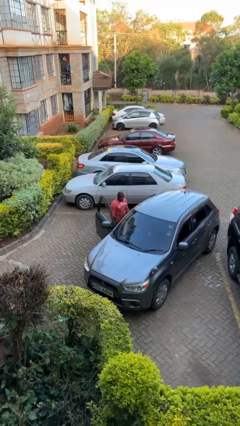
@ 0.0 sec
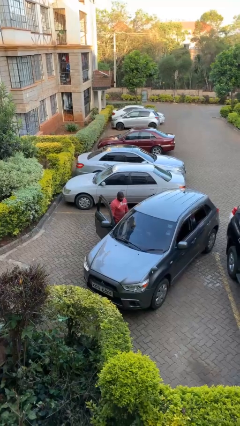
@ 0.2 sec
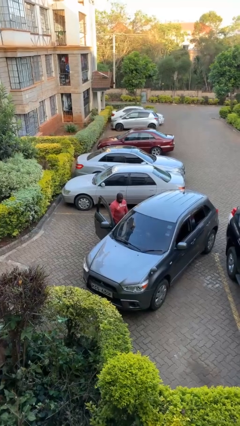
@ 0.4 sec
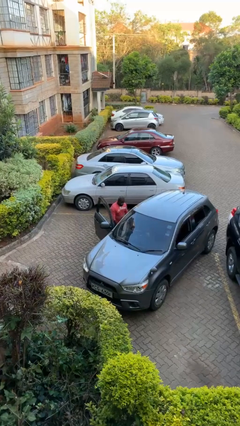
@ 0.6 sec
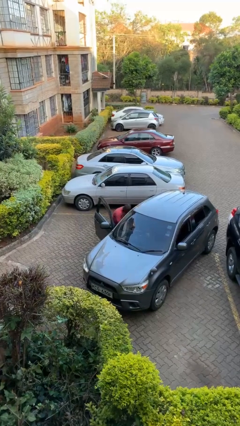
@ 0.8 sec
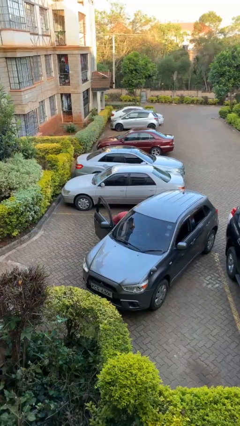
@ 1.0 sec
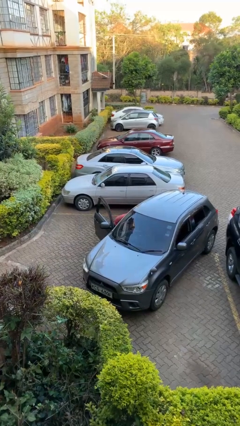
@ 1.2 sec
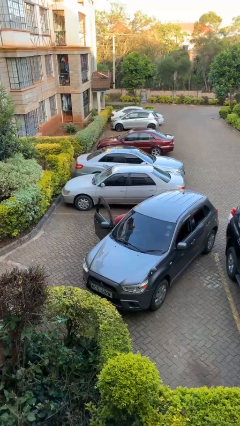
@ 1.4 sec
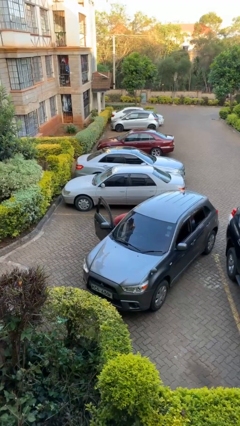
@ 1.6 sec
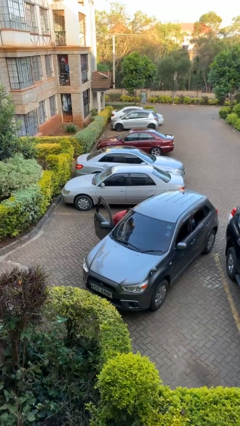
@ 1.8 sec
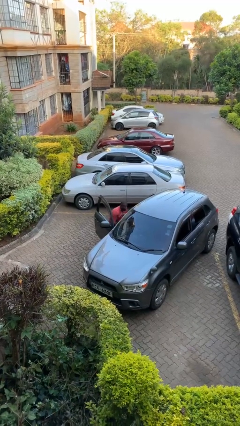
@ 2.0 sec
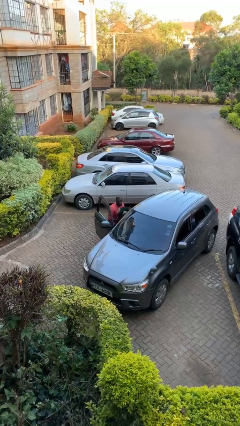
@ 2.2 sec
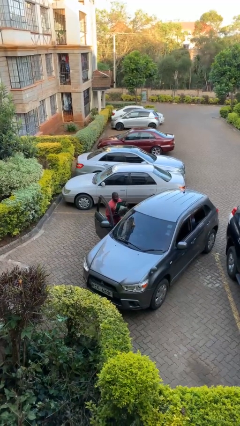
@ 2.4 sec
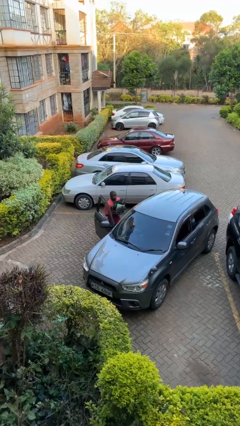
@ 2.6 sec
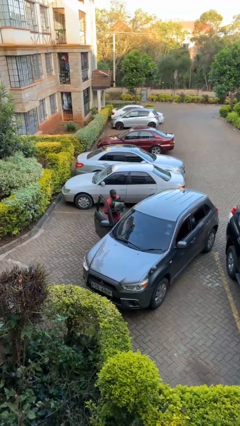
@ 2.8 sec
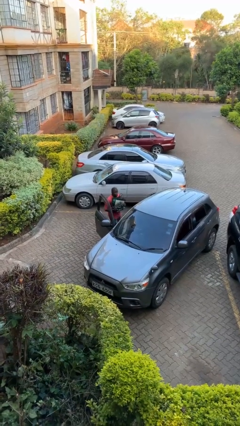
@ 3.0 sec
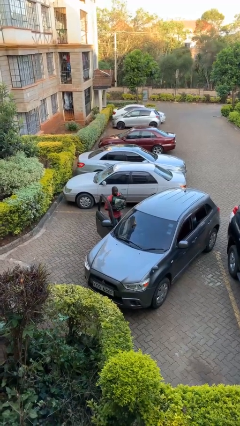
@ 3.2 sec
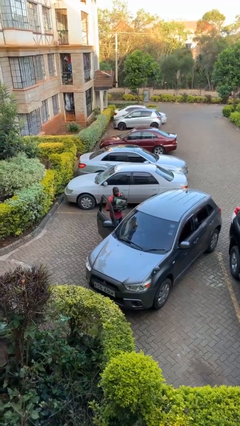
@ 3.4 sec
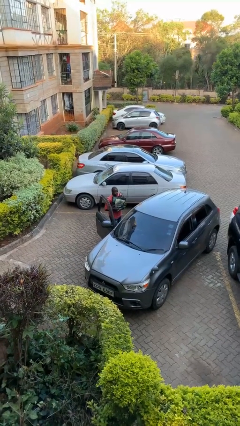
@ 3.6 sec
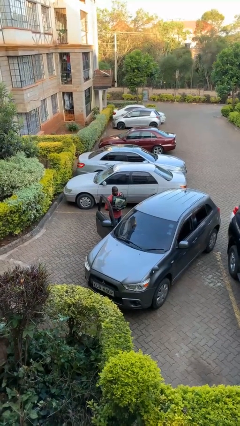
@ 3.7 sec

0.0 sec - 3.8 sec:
person unloads car

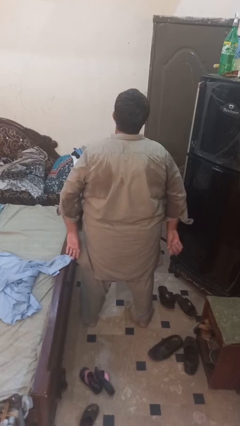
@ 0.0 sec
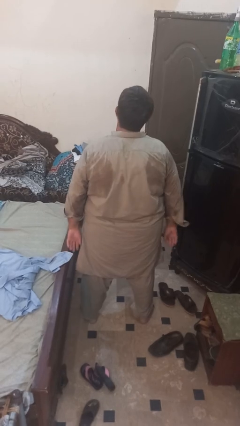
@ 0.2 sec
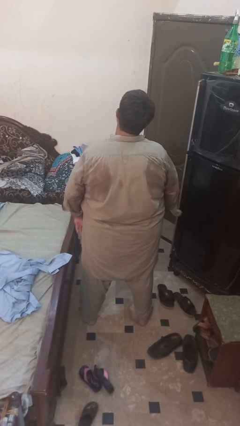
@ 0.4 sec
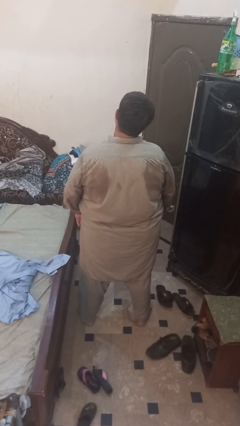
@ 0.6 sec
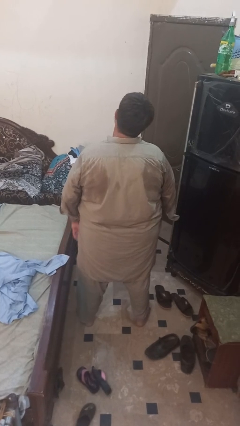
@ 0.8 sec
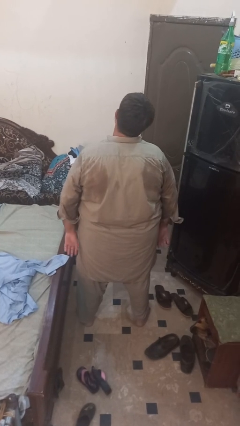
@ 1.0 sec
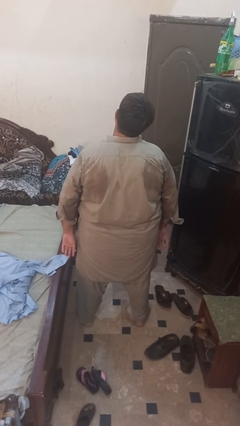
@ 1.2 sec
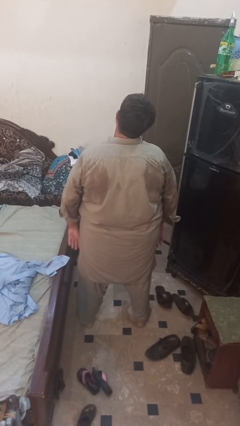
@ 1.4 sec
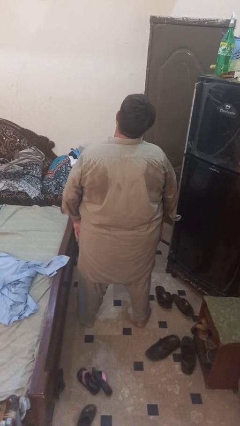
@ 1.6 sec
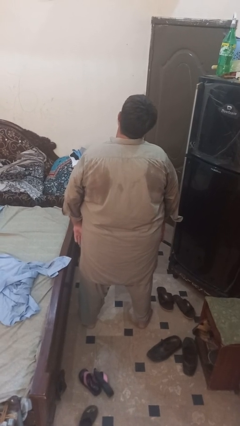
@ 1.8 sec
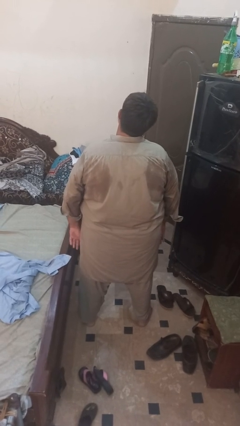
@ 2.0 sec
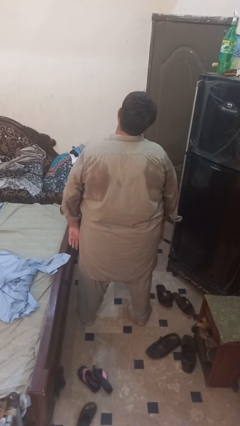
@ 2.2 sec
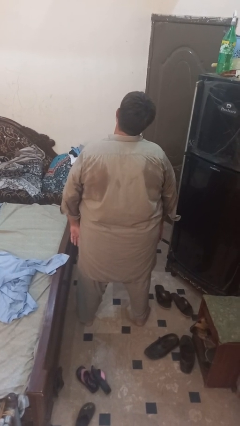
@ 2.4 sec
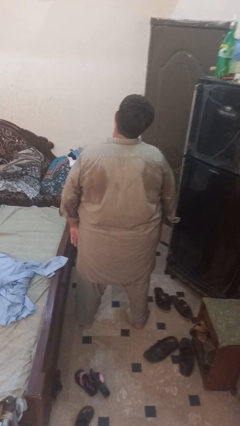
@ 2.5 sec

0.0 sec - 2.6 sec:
person shrugs

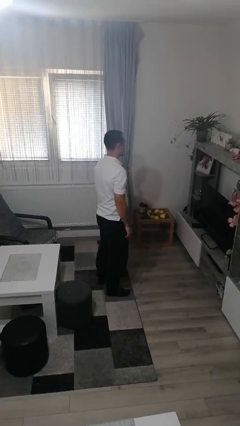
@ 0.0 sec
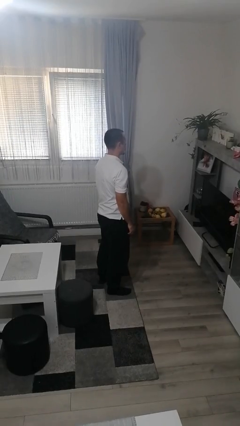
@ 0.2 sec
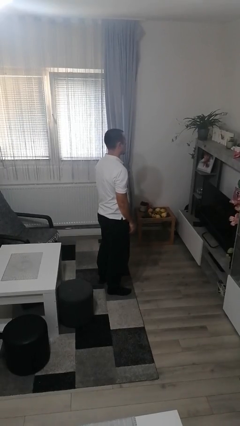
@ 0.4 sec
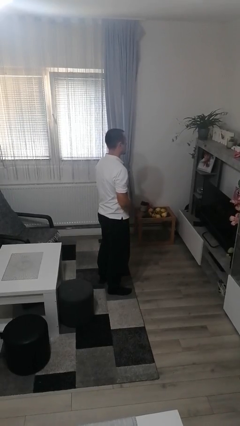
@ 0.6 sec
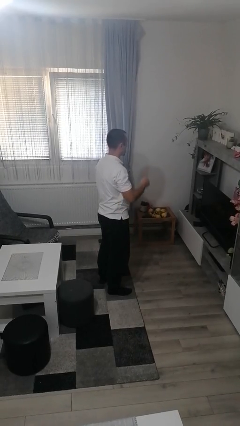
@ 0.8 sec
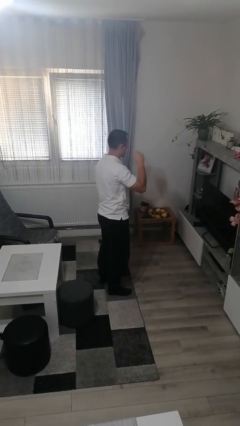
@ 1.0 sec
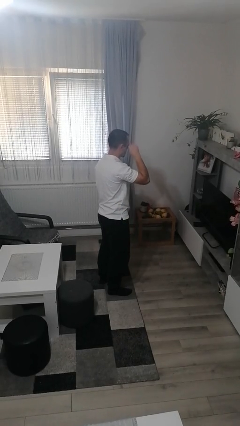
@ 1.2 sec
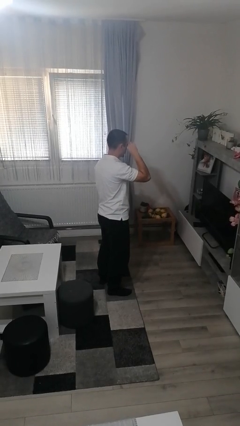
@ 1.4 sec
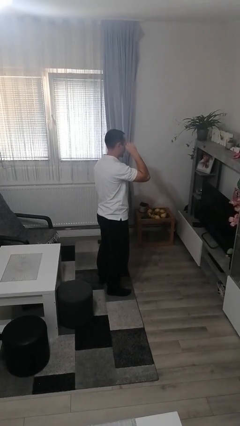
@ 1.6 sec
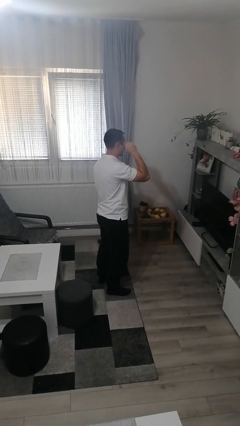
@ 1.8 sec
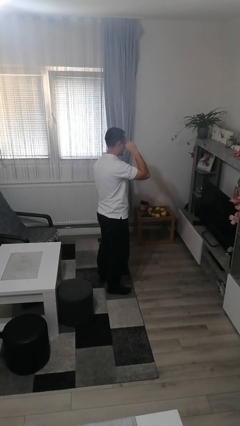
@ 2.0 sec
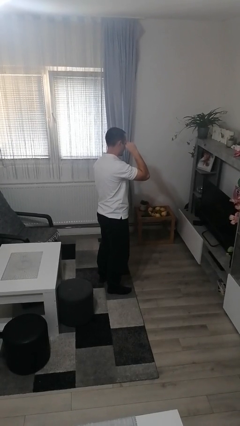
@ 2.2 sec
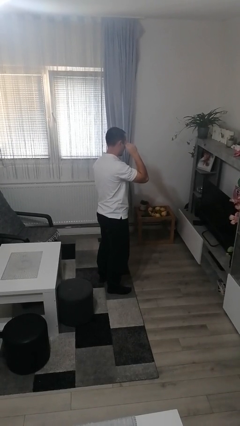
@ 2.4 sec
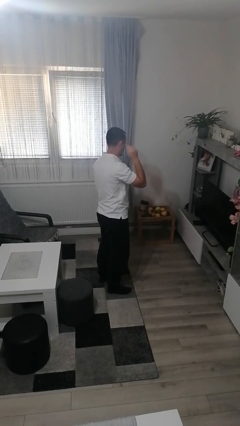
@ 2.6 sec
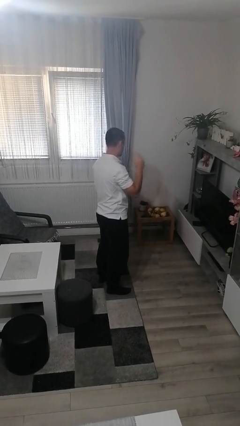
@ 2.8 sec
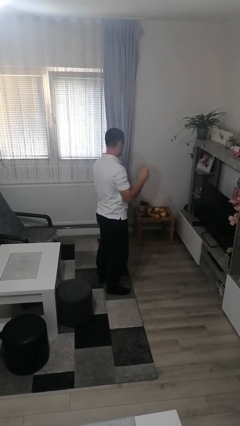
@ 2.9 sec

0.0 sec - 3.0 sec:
person rubs eyes

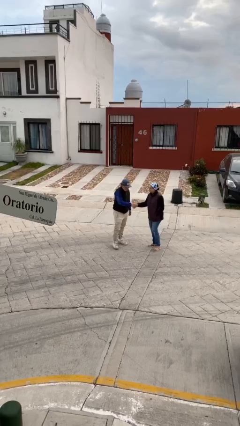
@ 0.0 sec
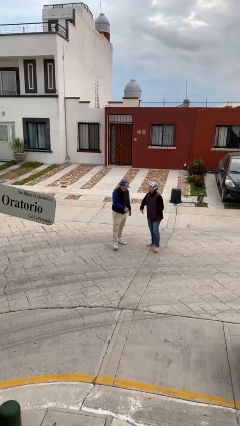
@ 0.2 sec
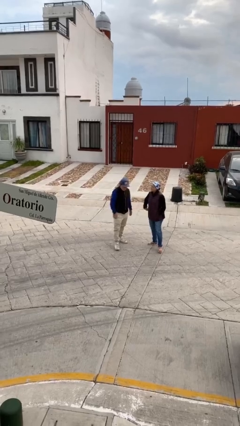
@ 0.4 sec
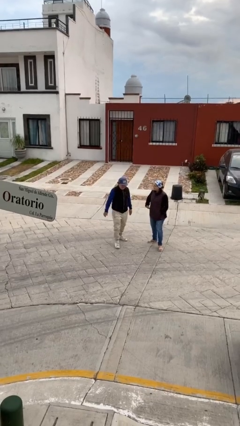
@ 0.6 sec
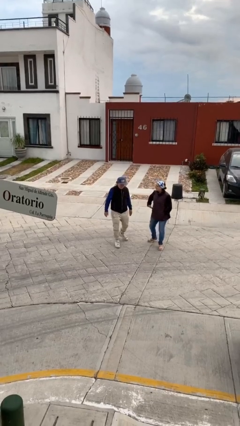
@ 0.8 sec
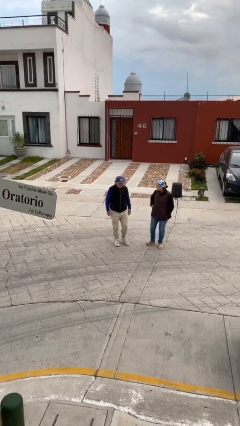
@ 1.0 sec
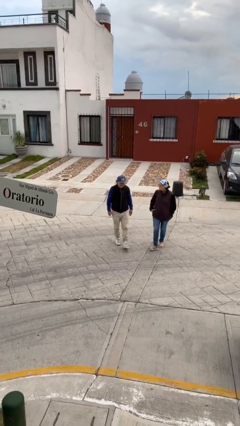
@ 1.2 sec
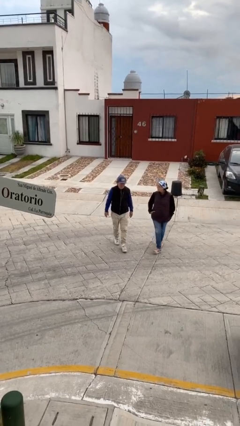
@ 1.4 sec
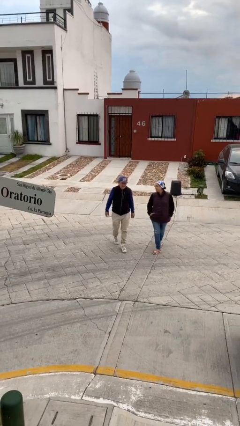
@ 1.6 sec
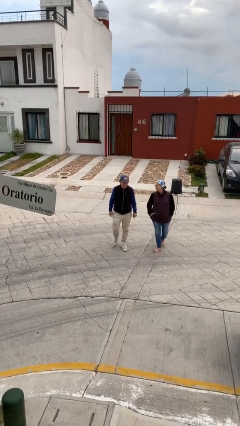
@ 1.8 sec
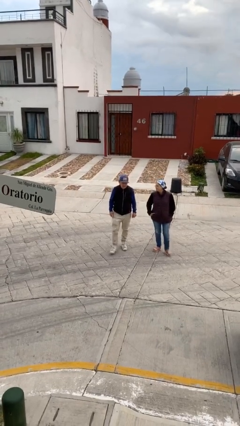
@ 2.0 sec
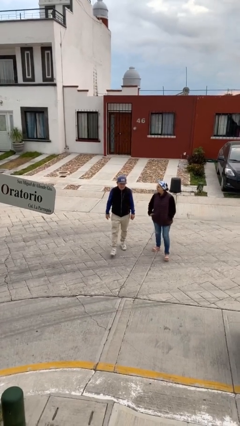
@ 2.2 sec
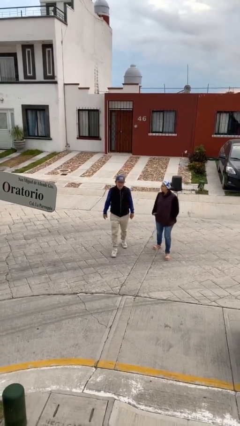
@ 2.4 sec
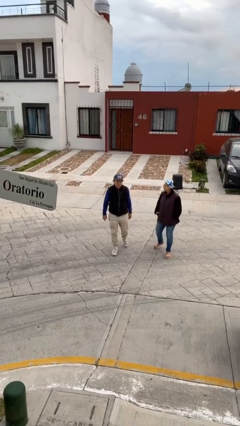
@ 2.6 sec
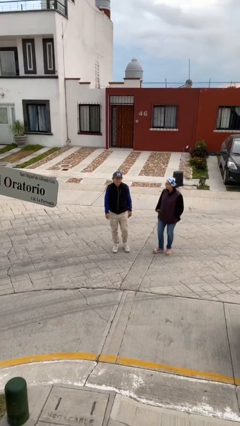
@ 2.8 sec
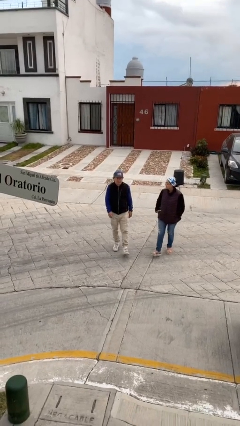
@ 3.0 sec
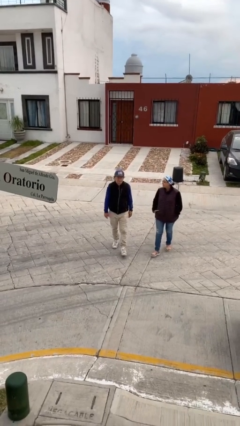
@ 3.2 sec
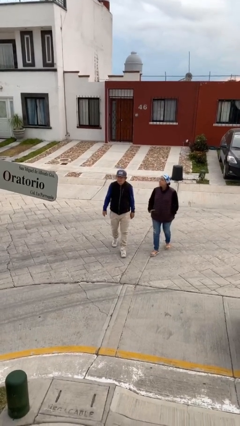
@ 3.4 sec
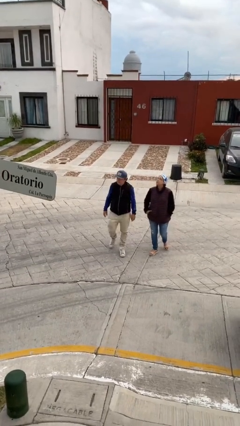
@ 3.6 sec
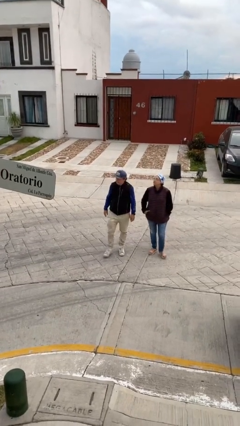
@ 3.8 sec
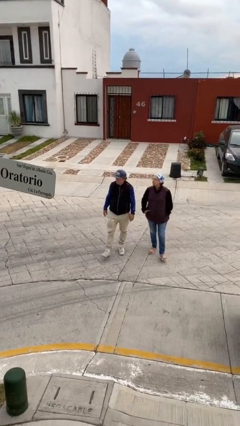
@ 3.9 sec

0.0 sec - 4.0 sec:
person talks to person

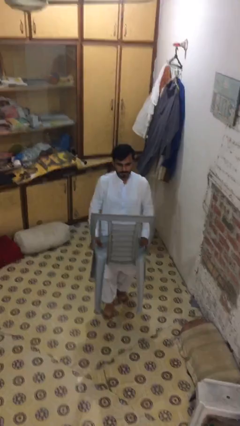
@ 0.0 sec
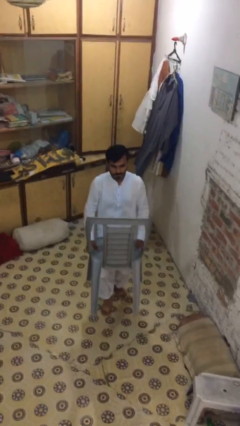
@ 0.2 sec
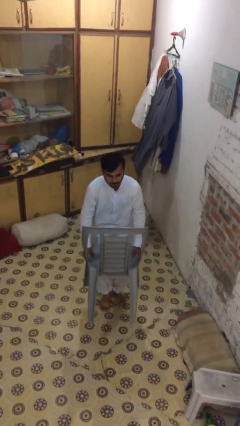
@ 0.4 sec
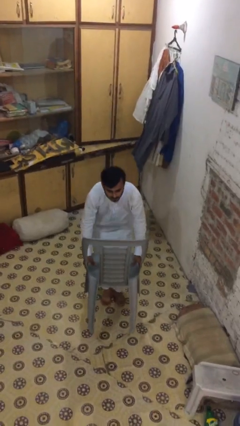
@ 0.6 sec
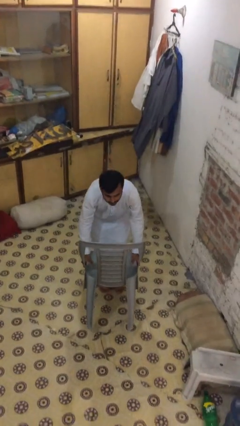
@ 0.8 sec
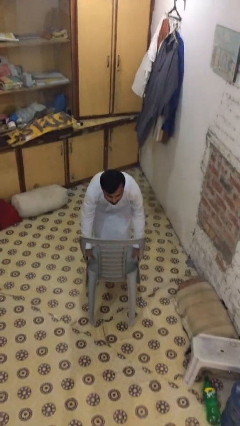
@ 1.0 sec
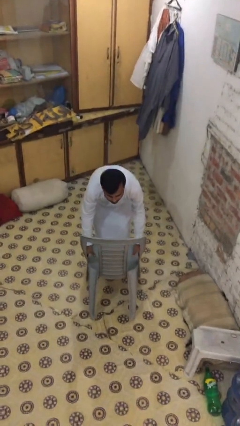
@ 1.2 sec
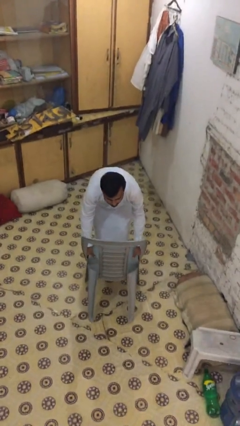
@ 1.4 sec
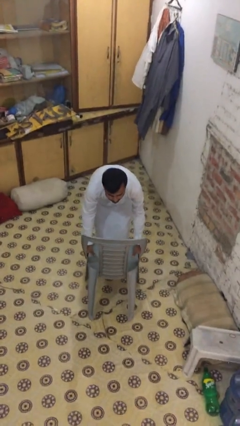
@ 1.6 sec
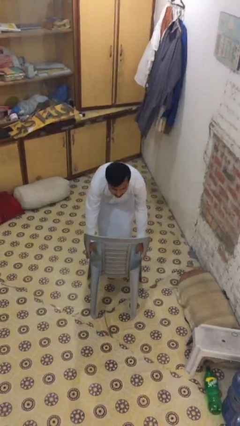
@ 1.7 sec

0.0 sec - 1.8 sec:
person puts down object on floor

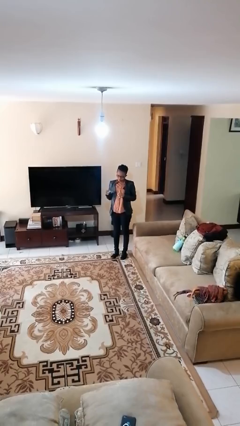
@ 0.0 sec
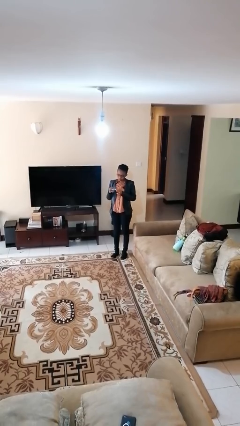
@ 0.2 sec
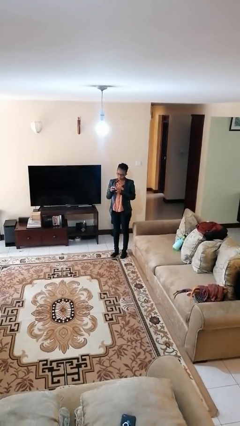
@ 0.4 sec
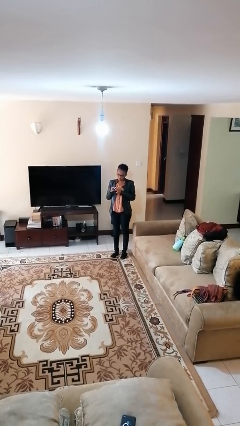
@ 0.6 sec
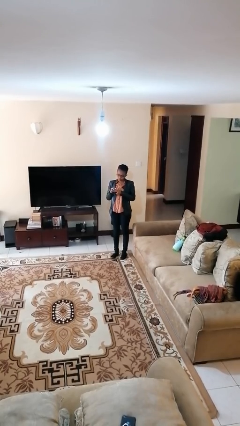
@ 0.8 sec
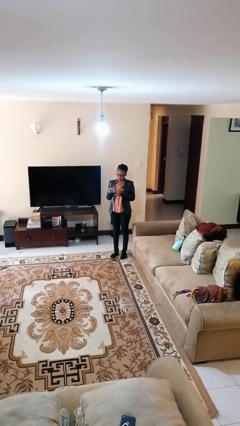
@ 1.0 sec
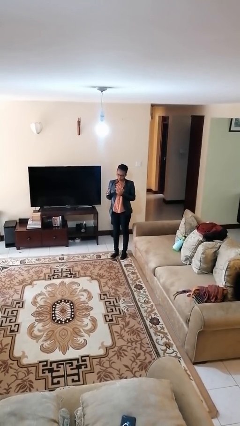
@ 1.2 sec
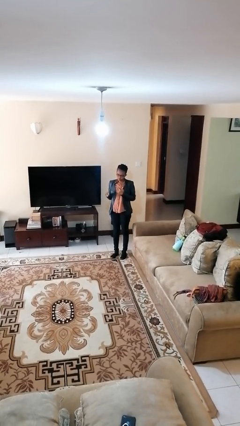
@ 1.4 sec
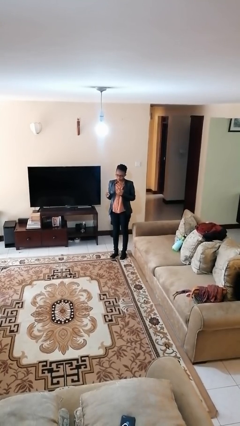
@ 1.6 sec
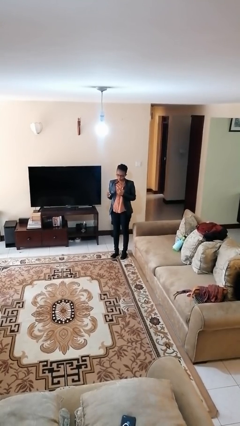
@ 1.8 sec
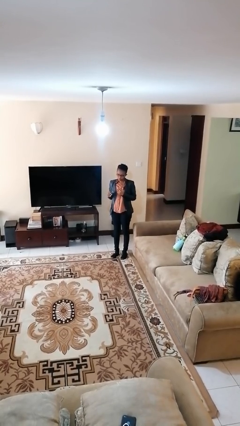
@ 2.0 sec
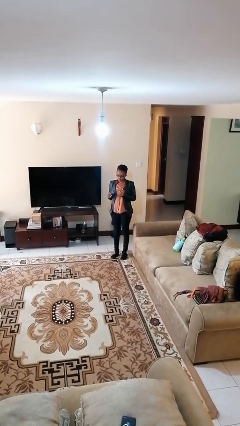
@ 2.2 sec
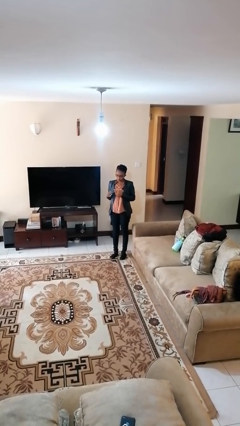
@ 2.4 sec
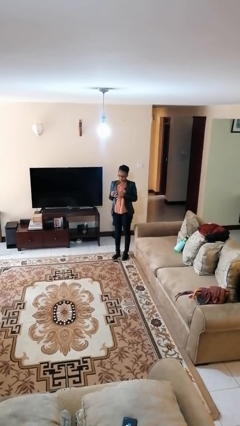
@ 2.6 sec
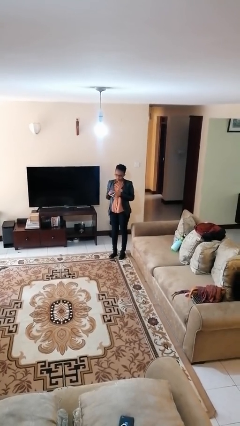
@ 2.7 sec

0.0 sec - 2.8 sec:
person puts on ring
